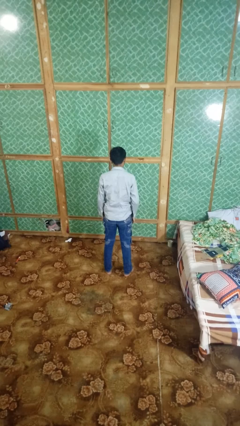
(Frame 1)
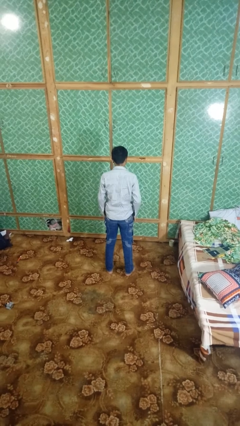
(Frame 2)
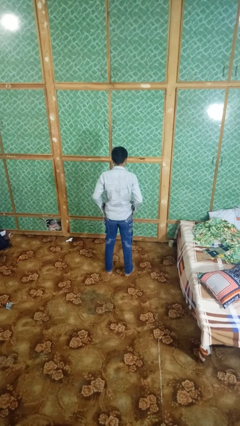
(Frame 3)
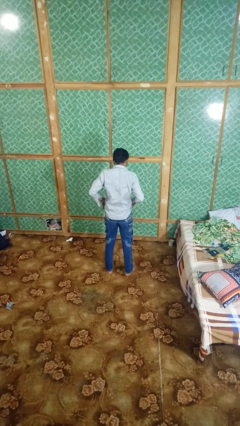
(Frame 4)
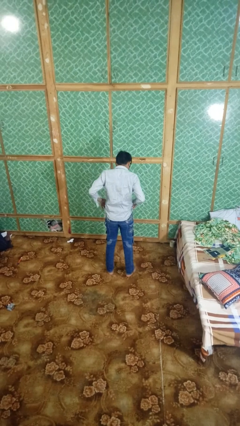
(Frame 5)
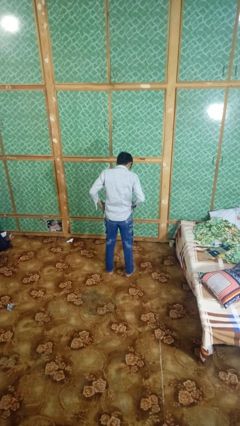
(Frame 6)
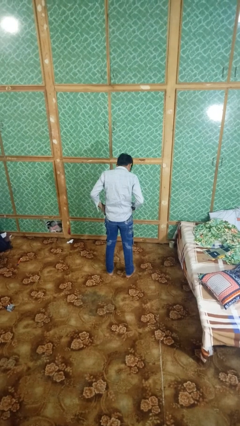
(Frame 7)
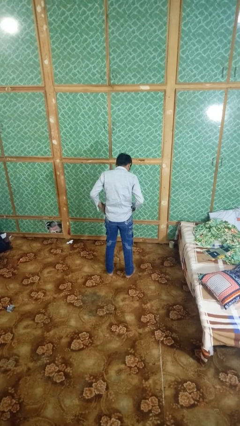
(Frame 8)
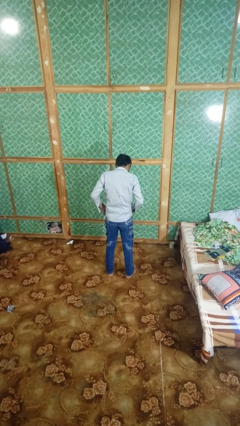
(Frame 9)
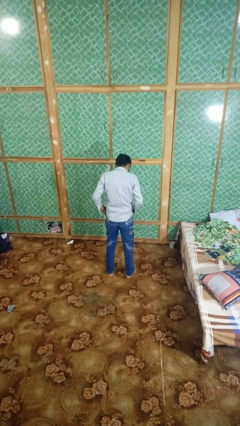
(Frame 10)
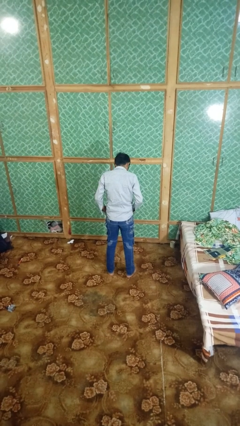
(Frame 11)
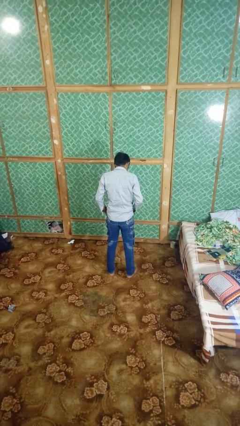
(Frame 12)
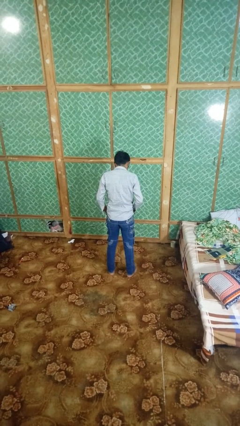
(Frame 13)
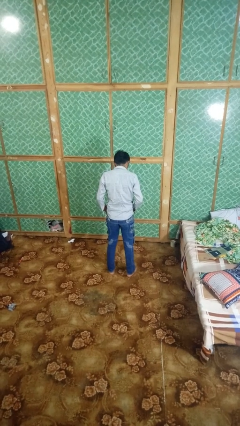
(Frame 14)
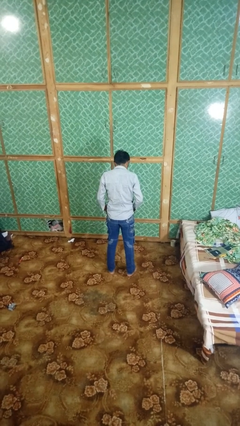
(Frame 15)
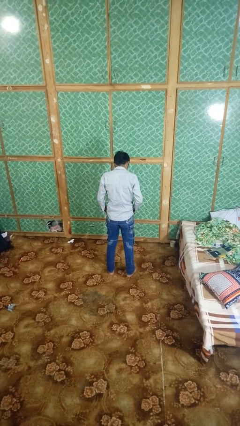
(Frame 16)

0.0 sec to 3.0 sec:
person puts hands in back pockets

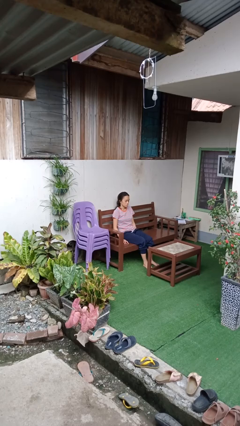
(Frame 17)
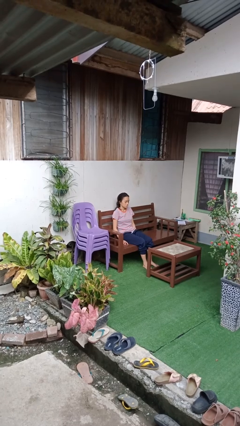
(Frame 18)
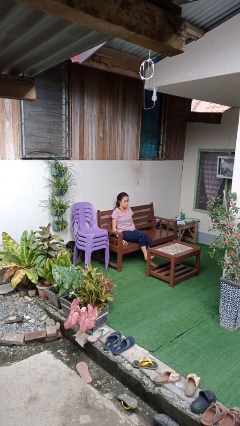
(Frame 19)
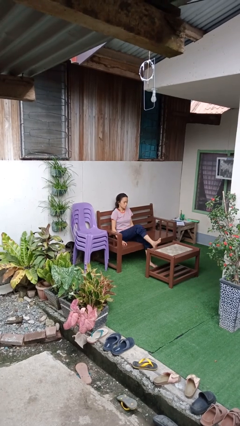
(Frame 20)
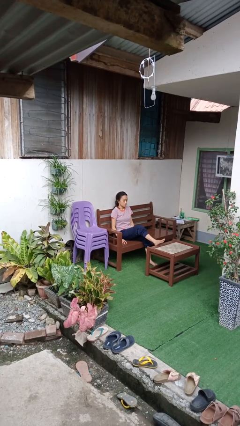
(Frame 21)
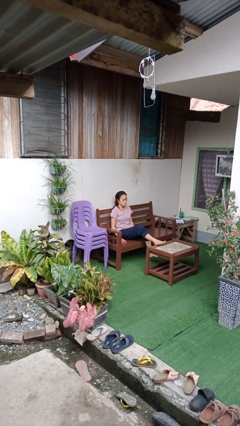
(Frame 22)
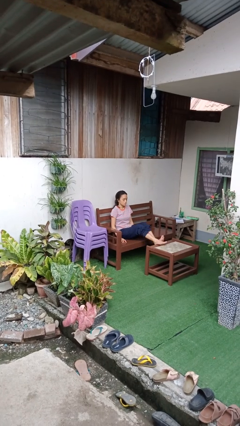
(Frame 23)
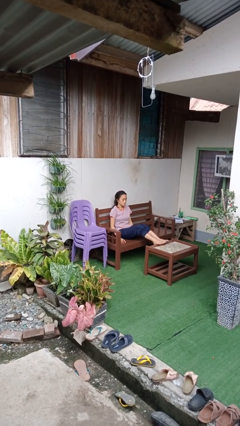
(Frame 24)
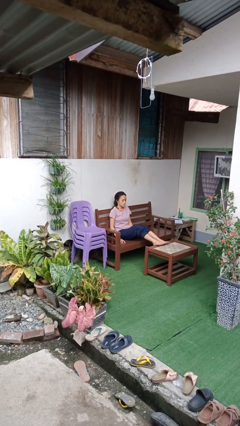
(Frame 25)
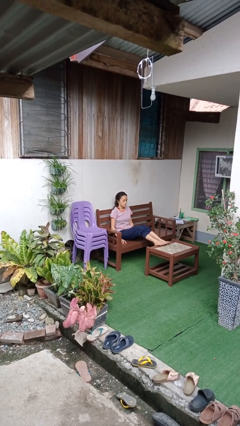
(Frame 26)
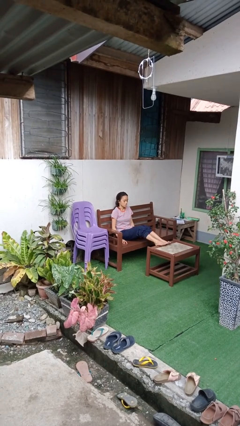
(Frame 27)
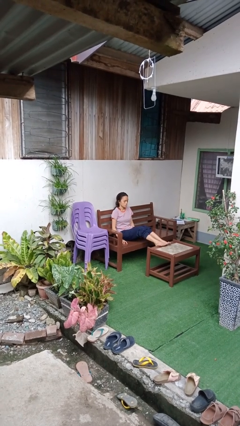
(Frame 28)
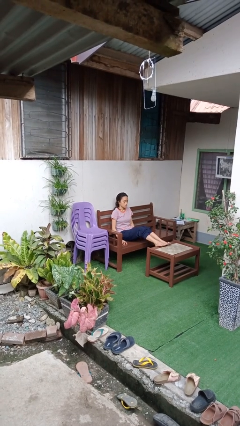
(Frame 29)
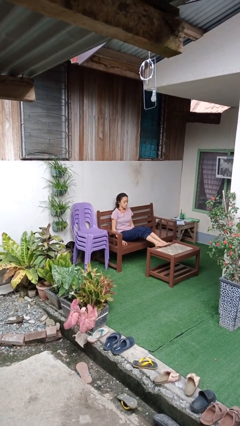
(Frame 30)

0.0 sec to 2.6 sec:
person puts feet up

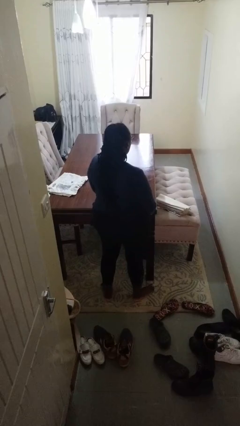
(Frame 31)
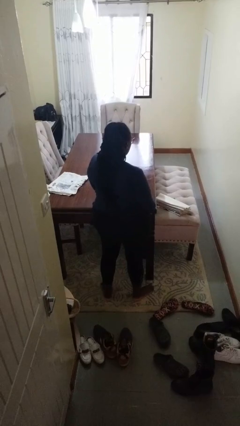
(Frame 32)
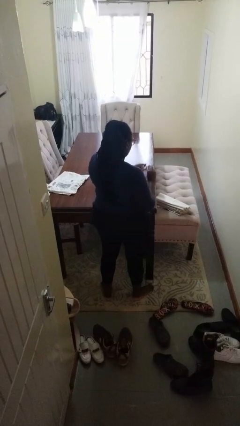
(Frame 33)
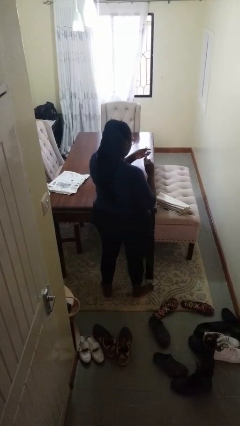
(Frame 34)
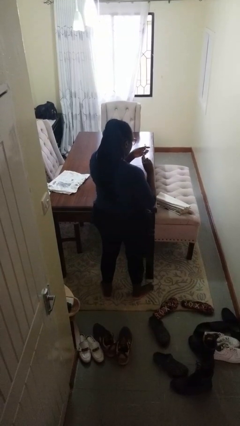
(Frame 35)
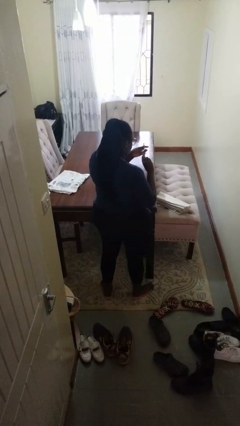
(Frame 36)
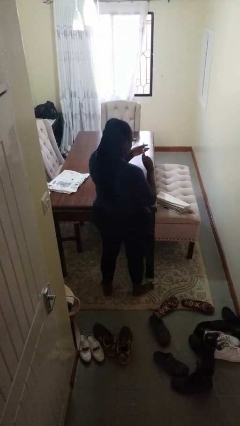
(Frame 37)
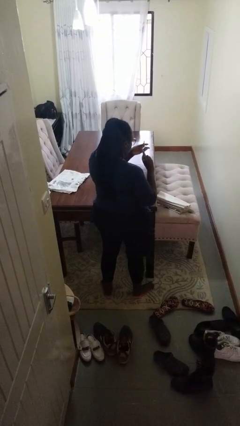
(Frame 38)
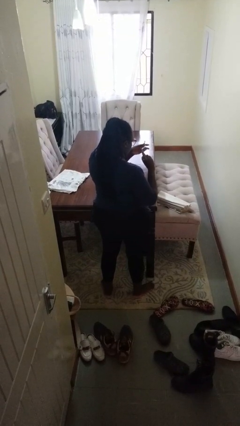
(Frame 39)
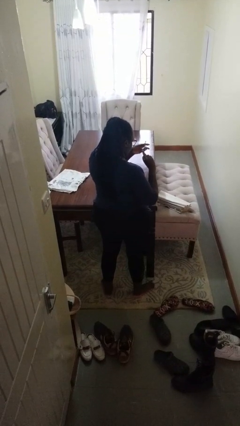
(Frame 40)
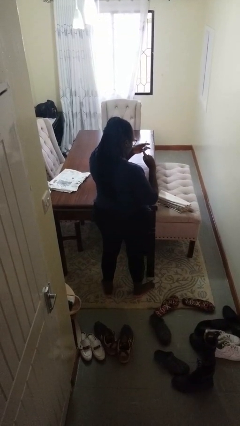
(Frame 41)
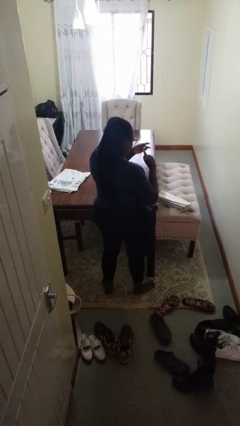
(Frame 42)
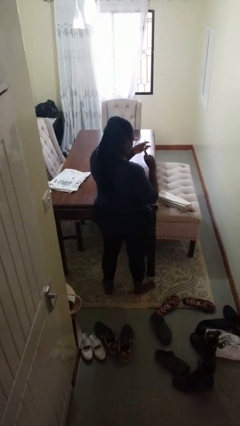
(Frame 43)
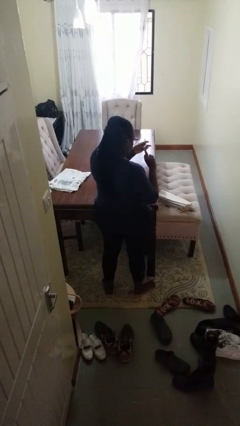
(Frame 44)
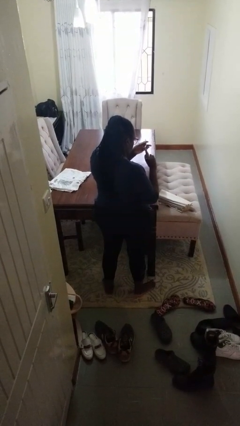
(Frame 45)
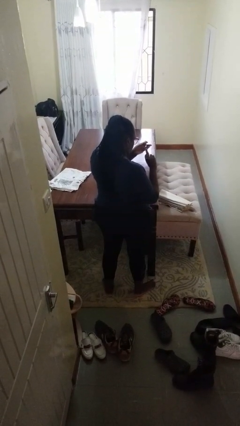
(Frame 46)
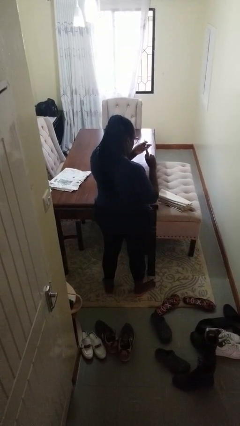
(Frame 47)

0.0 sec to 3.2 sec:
person clips fingernails

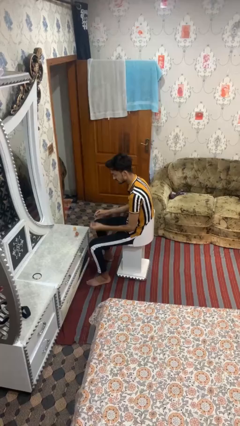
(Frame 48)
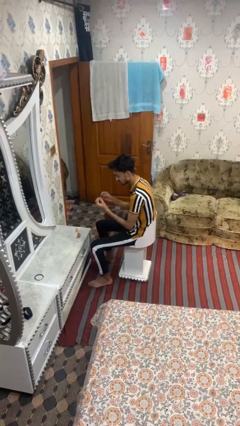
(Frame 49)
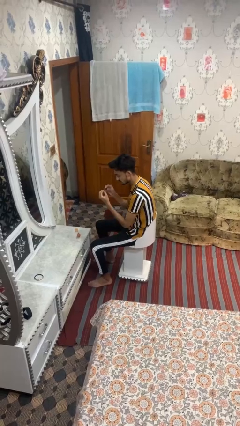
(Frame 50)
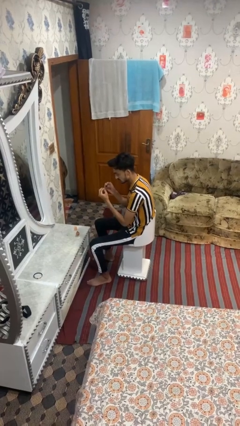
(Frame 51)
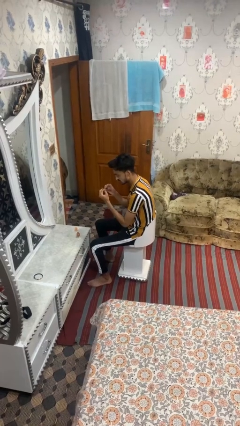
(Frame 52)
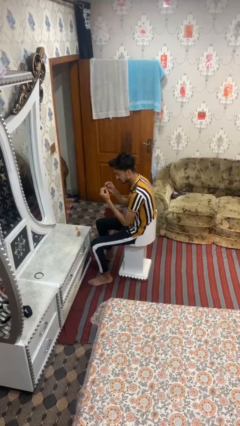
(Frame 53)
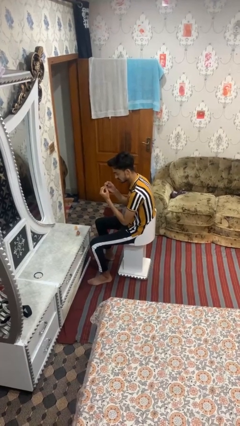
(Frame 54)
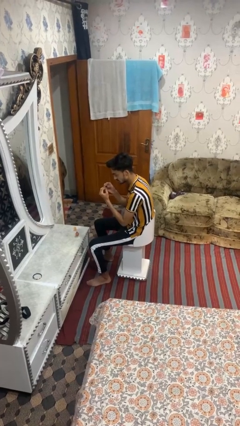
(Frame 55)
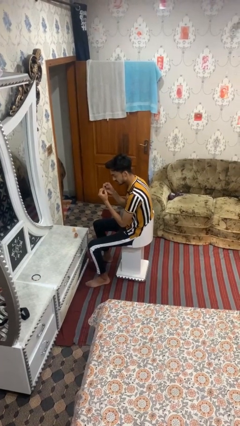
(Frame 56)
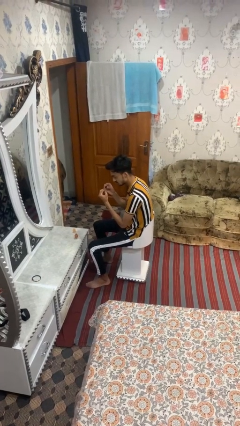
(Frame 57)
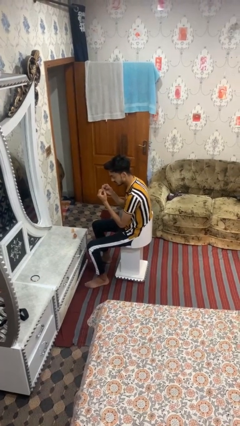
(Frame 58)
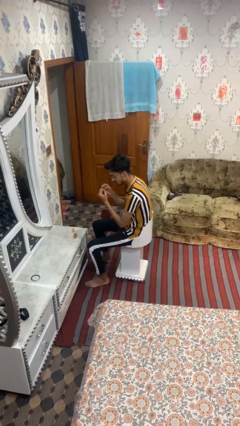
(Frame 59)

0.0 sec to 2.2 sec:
person paints fingernails

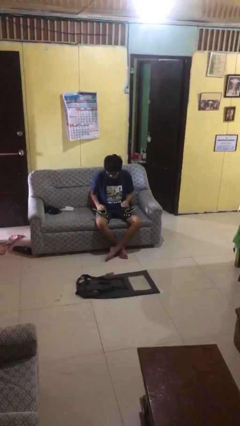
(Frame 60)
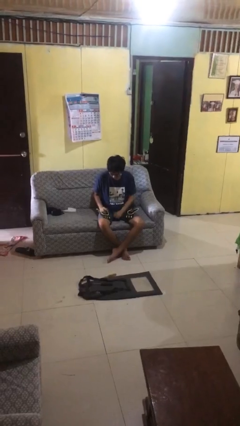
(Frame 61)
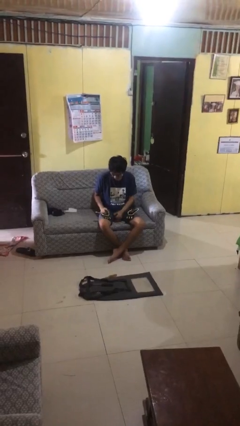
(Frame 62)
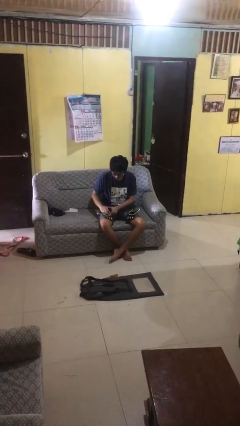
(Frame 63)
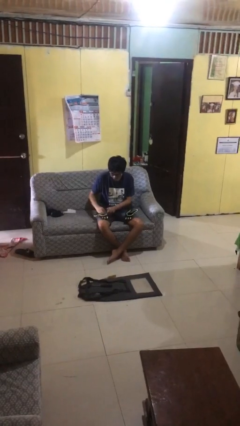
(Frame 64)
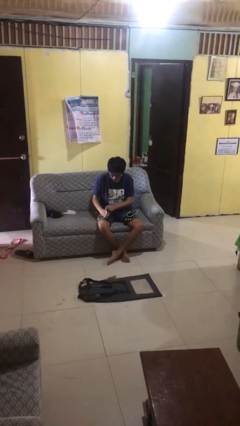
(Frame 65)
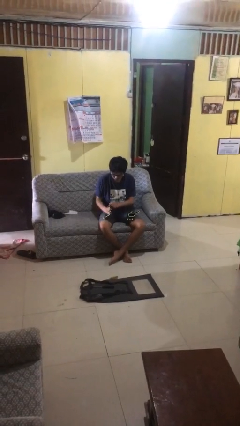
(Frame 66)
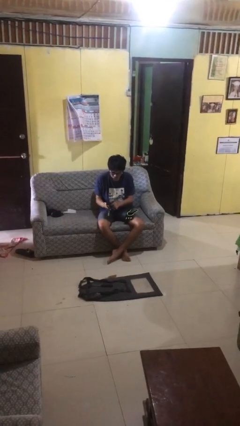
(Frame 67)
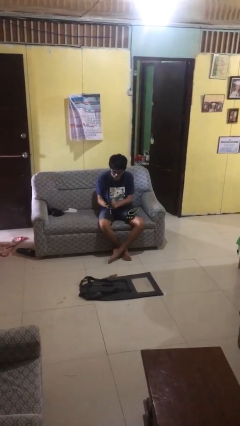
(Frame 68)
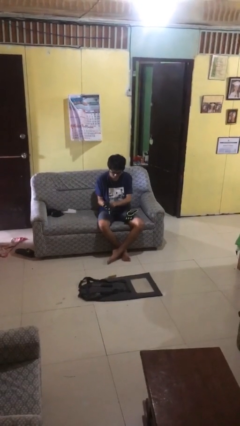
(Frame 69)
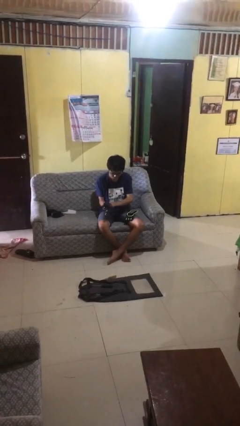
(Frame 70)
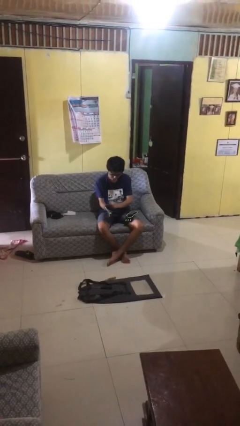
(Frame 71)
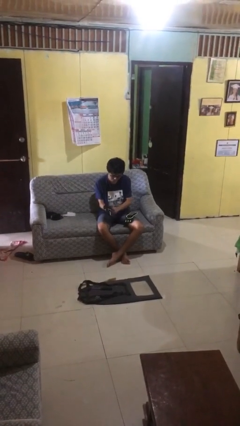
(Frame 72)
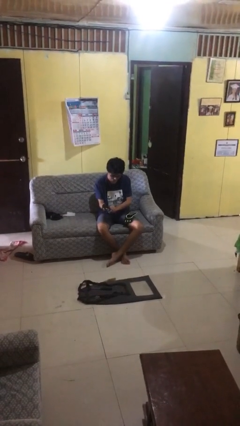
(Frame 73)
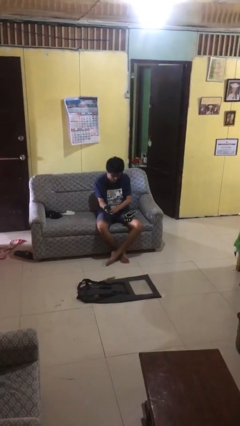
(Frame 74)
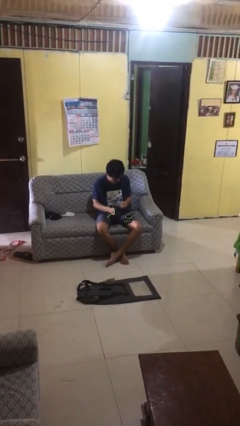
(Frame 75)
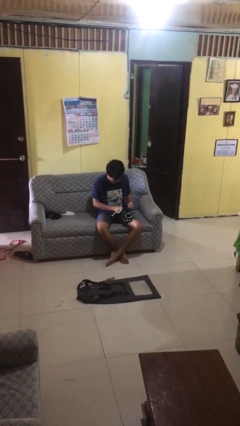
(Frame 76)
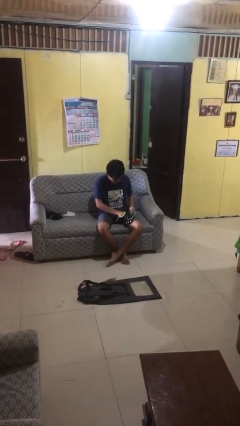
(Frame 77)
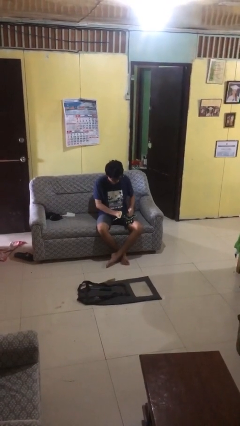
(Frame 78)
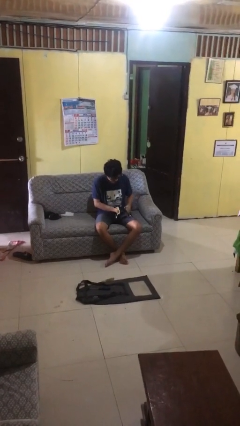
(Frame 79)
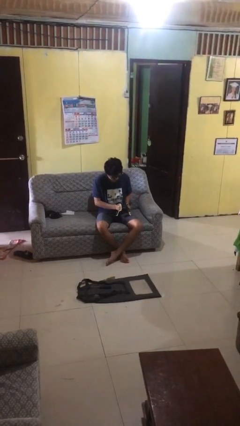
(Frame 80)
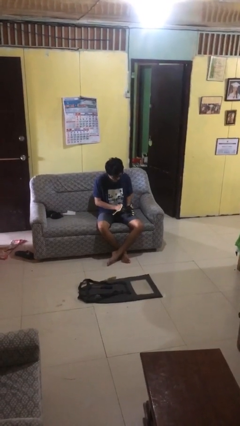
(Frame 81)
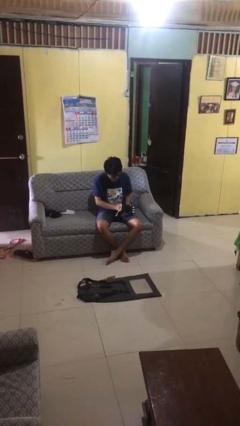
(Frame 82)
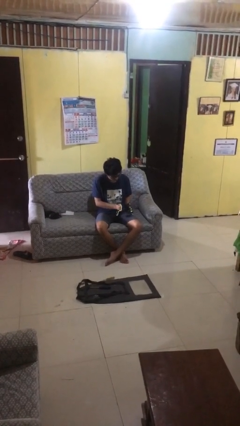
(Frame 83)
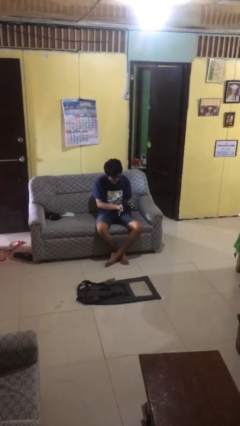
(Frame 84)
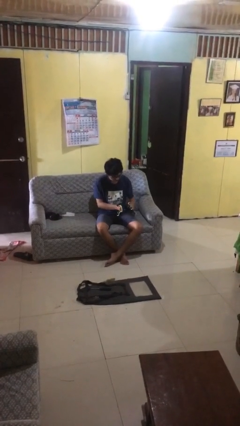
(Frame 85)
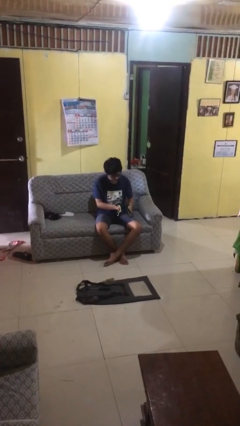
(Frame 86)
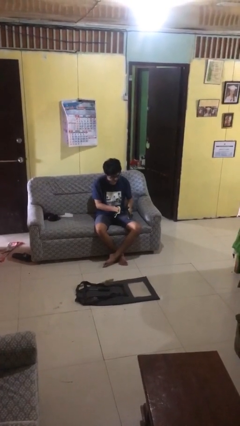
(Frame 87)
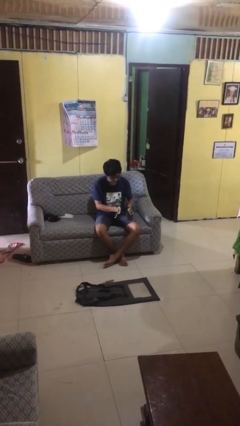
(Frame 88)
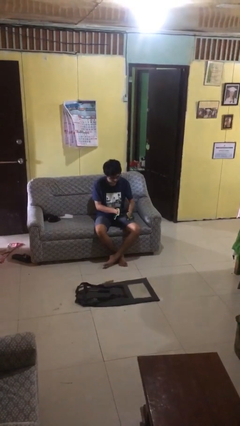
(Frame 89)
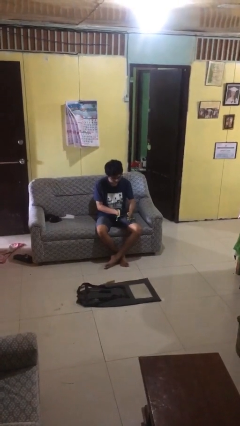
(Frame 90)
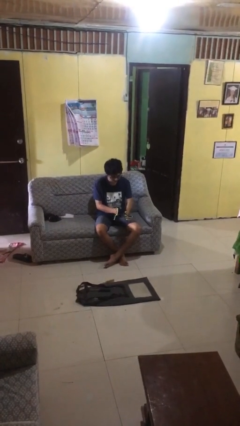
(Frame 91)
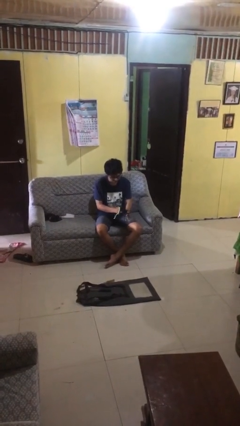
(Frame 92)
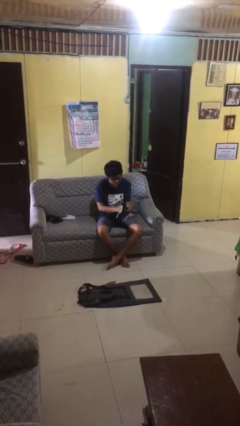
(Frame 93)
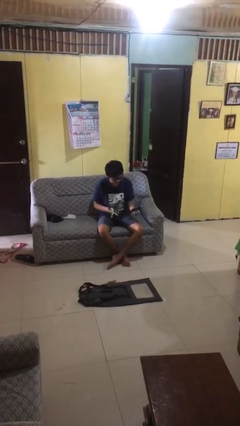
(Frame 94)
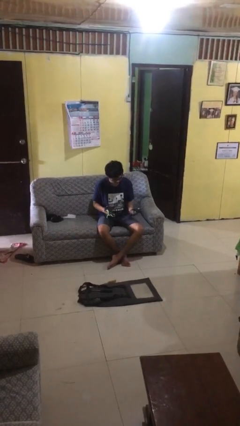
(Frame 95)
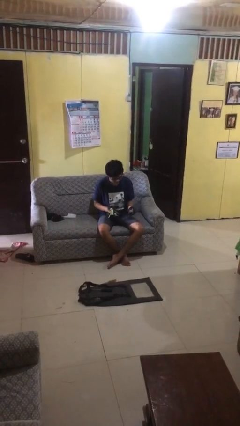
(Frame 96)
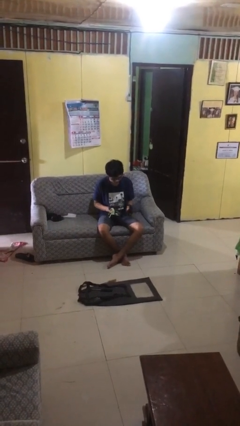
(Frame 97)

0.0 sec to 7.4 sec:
person puts on gloves
